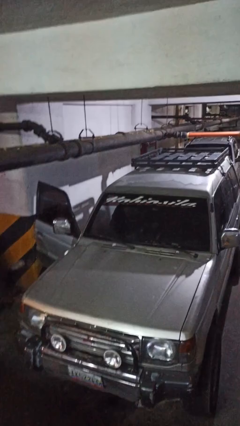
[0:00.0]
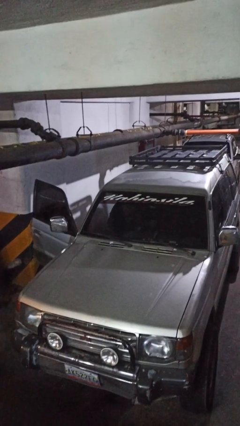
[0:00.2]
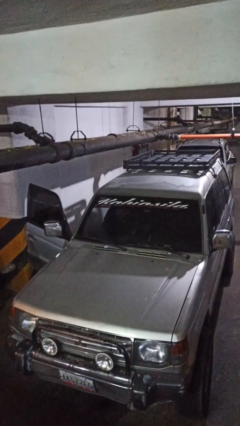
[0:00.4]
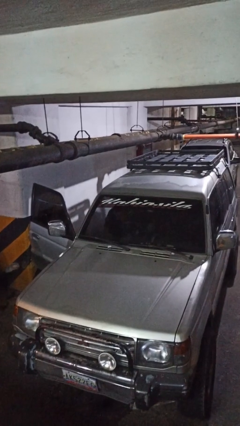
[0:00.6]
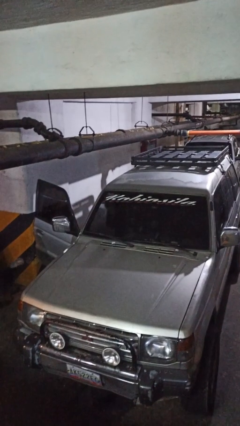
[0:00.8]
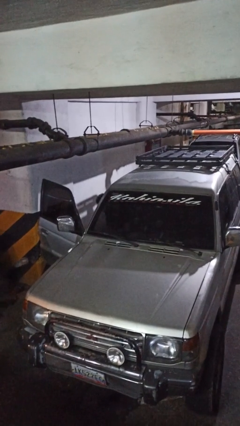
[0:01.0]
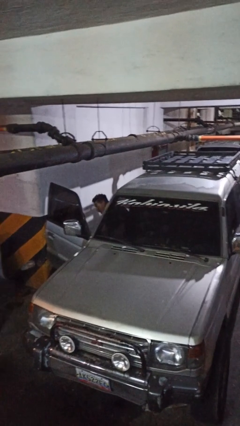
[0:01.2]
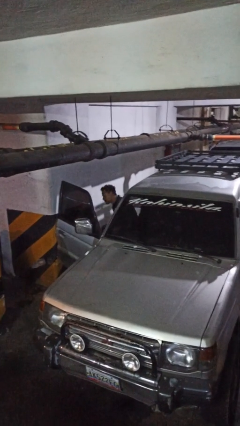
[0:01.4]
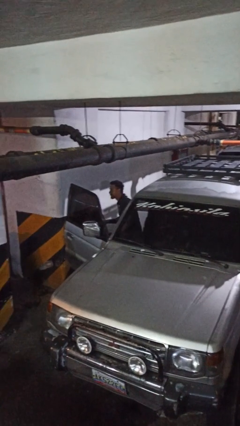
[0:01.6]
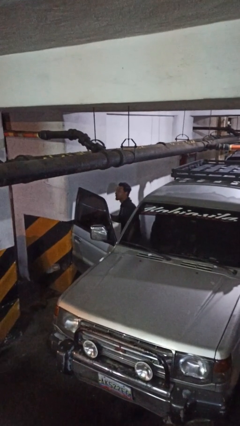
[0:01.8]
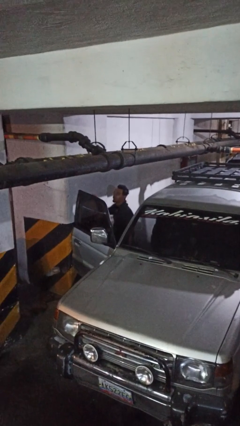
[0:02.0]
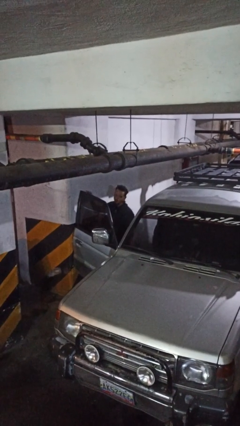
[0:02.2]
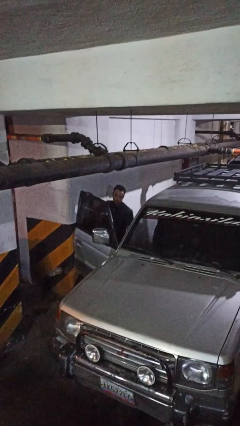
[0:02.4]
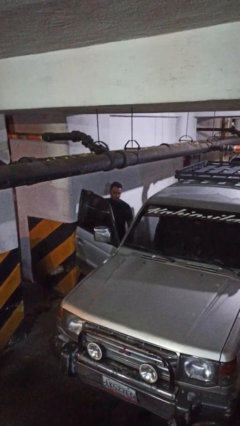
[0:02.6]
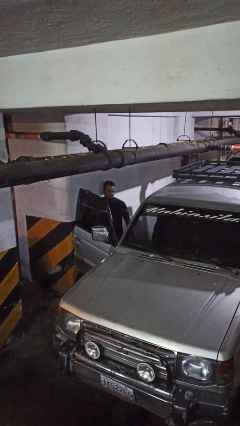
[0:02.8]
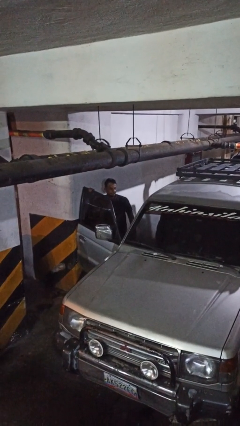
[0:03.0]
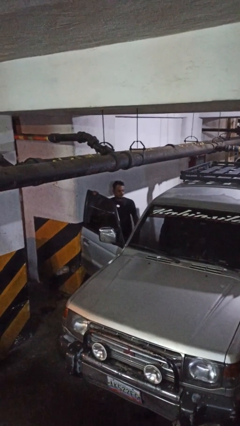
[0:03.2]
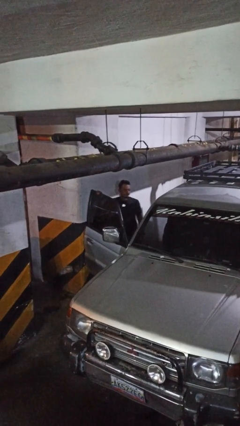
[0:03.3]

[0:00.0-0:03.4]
person exits car

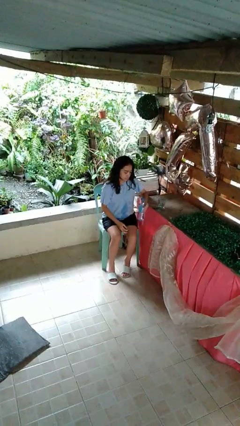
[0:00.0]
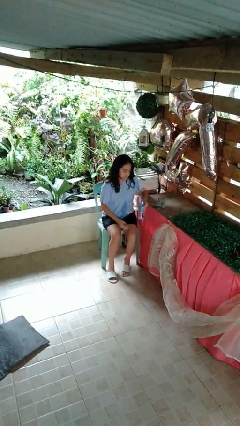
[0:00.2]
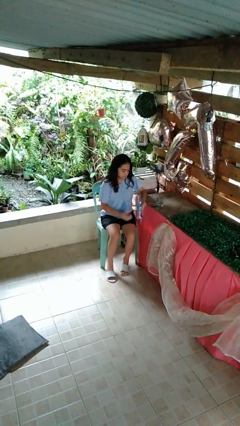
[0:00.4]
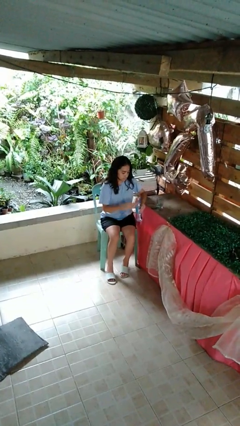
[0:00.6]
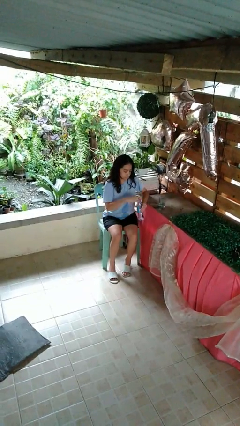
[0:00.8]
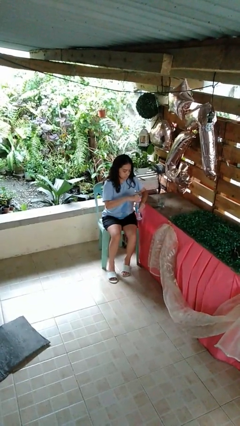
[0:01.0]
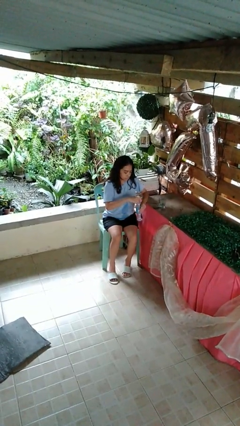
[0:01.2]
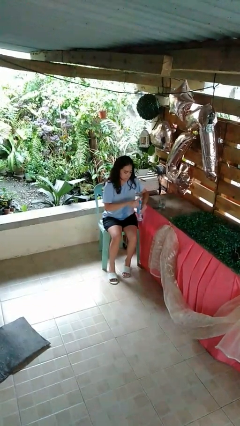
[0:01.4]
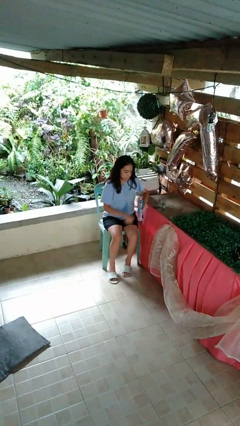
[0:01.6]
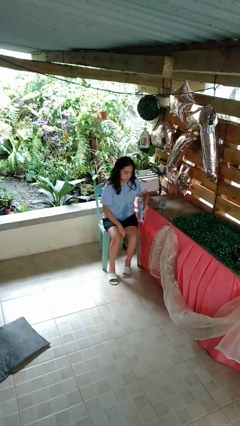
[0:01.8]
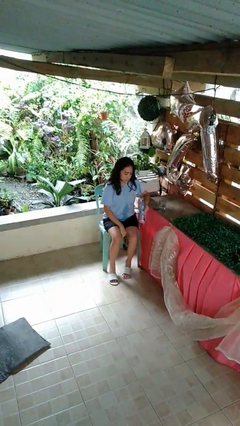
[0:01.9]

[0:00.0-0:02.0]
person screws lid to bottle

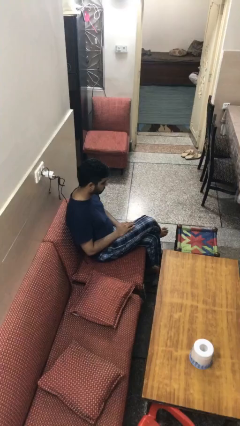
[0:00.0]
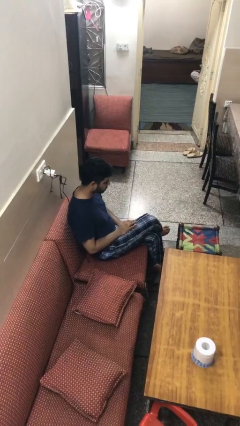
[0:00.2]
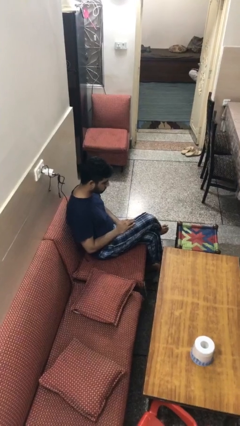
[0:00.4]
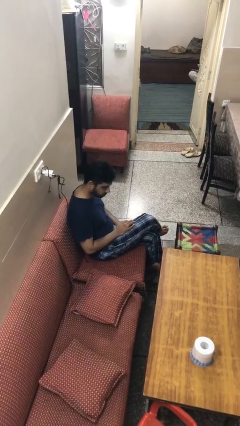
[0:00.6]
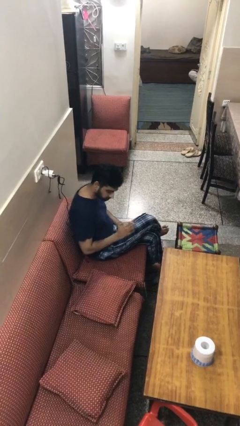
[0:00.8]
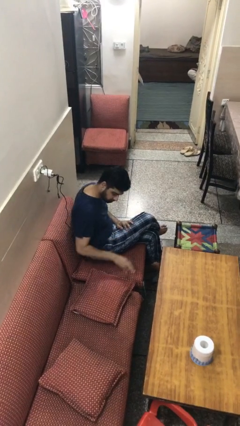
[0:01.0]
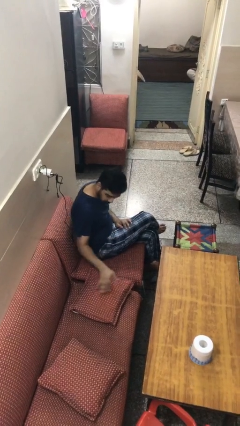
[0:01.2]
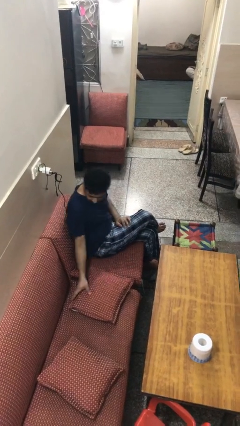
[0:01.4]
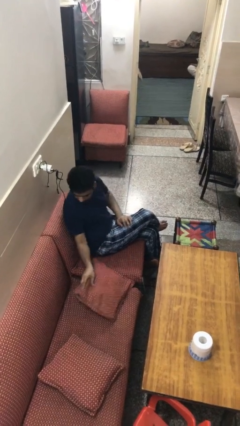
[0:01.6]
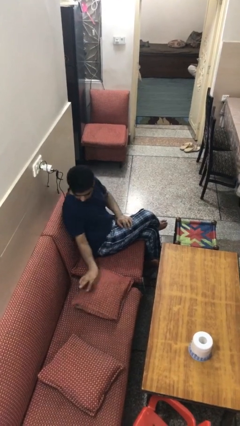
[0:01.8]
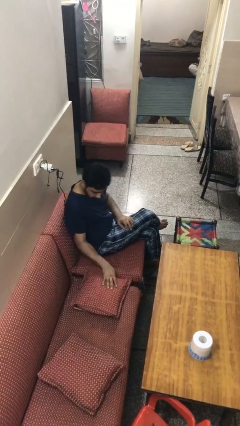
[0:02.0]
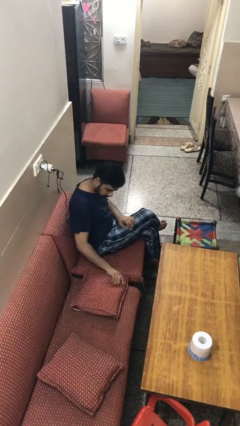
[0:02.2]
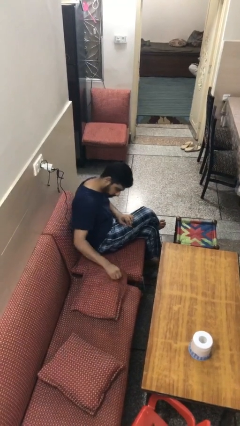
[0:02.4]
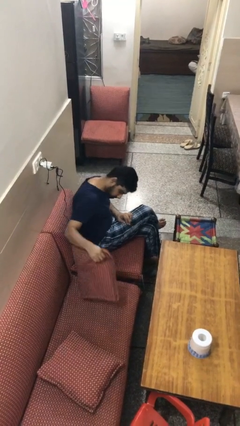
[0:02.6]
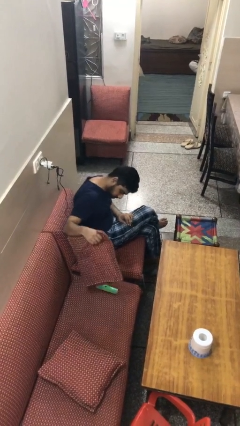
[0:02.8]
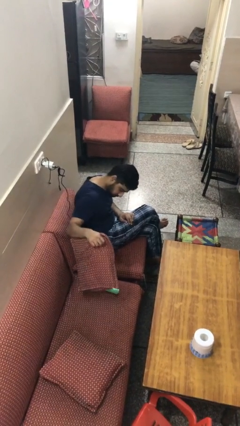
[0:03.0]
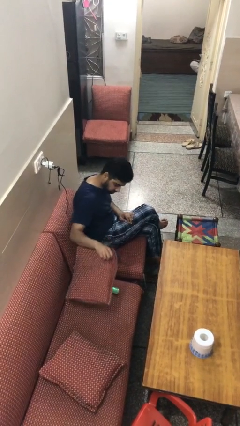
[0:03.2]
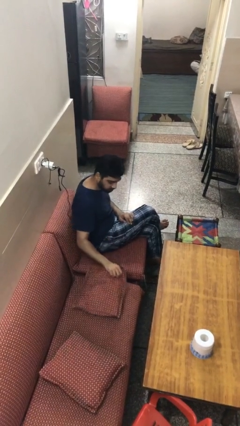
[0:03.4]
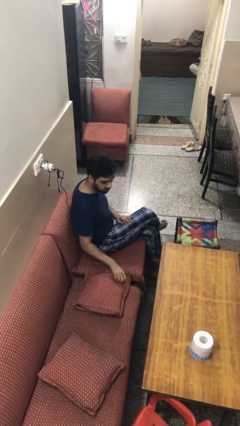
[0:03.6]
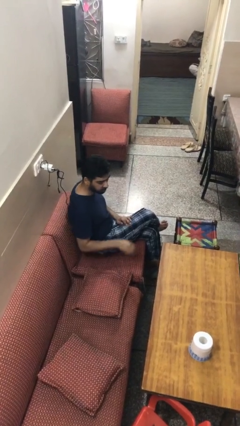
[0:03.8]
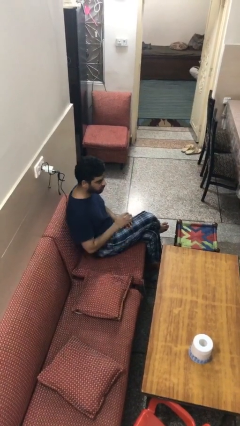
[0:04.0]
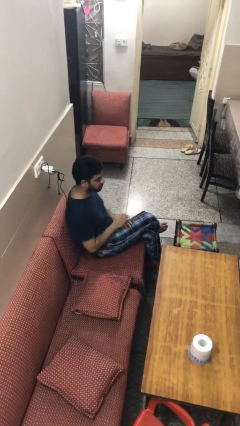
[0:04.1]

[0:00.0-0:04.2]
person searches in couch

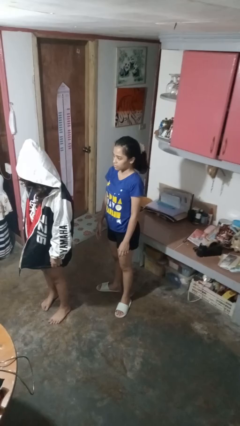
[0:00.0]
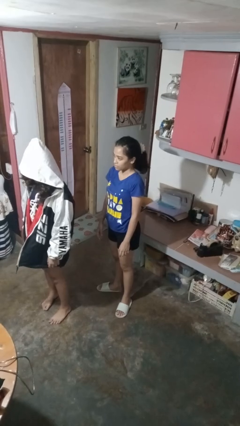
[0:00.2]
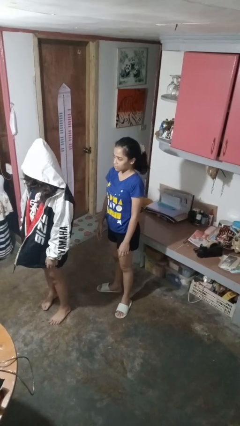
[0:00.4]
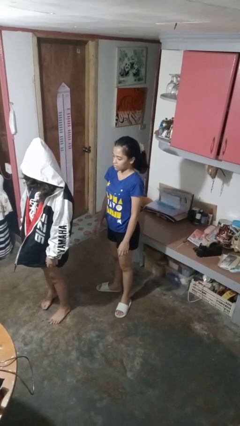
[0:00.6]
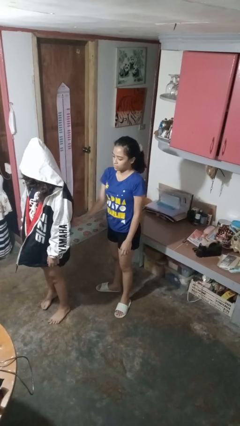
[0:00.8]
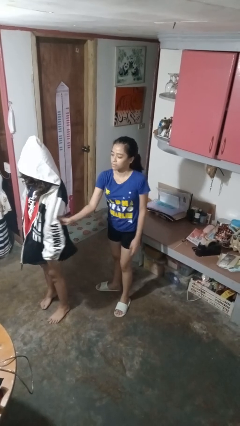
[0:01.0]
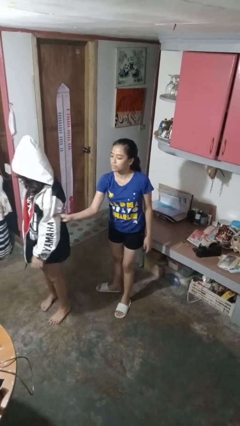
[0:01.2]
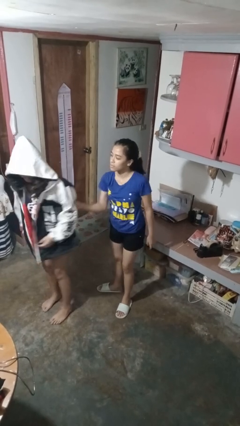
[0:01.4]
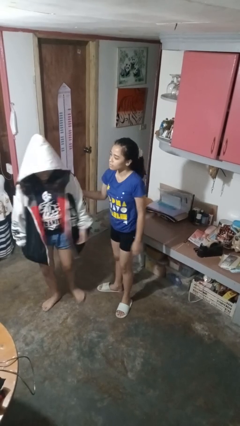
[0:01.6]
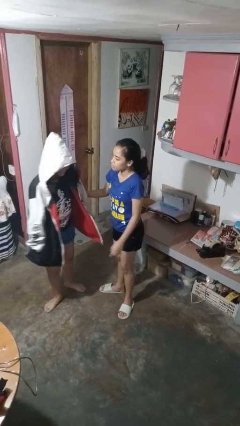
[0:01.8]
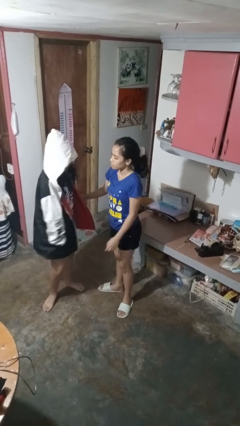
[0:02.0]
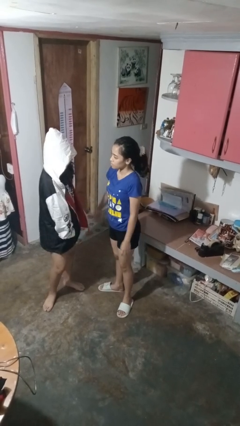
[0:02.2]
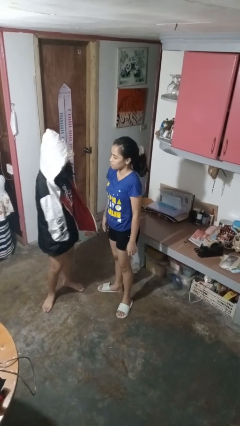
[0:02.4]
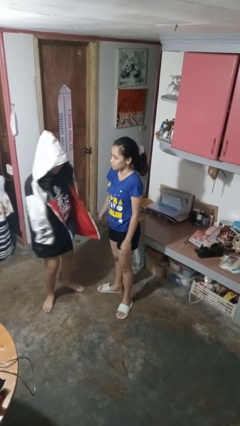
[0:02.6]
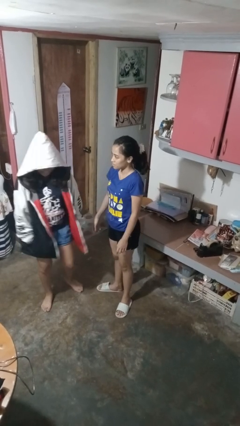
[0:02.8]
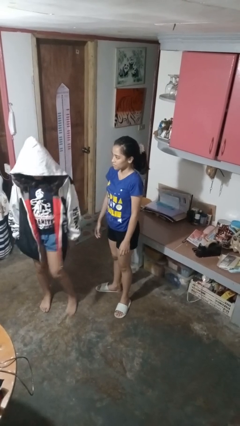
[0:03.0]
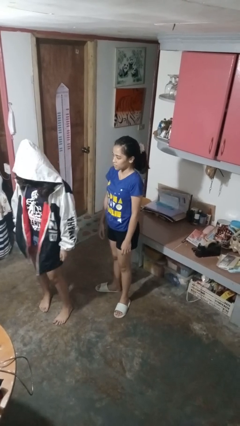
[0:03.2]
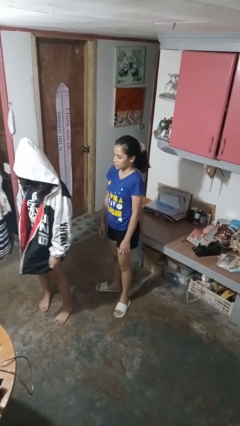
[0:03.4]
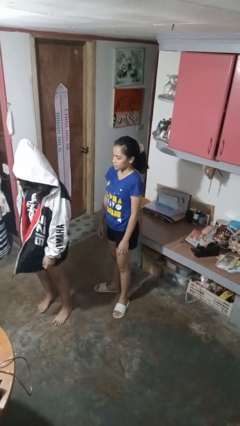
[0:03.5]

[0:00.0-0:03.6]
person grabs person by bicep

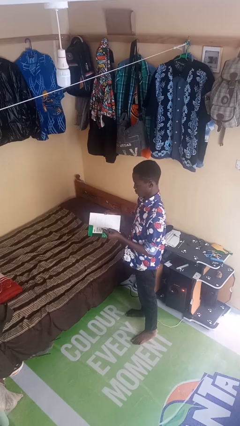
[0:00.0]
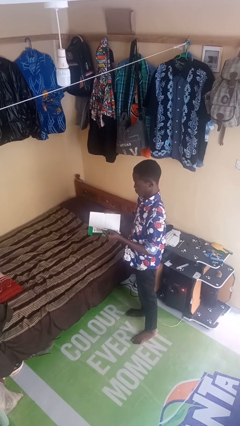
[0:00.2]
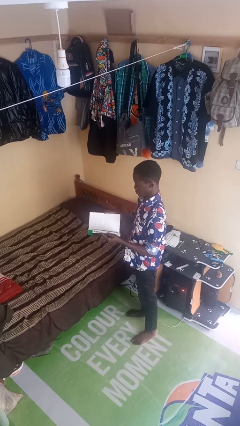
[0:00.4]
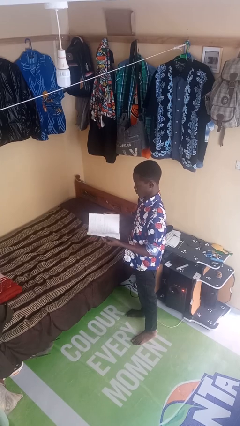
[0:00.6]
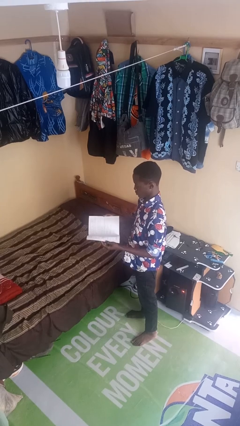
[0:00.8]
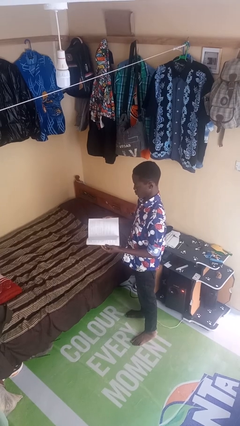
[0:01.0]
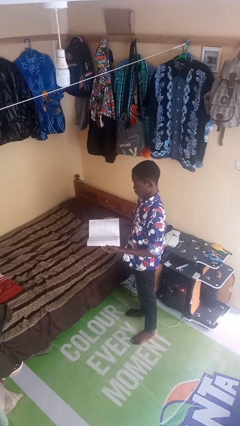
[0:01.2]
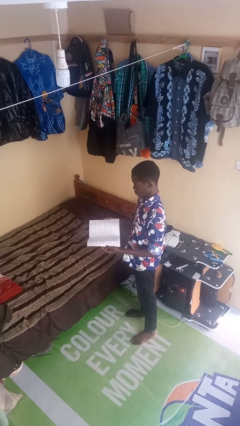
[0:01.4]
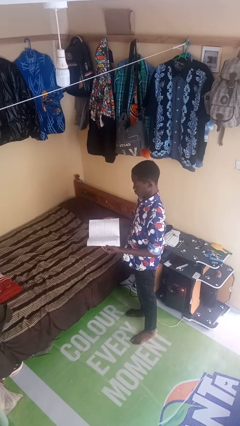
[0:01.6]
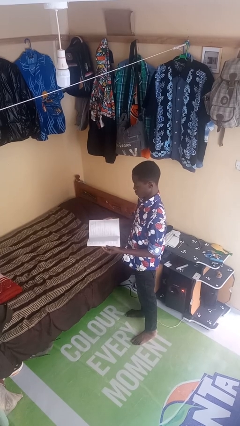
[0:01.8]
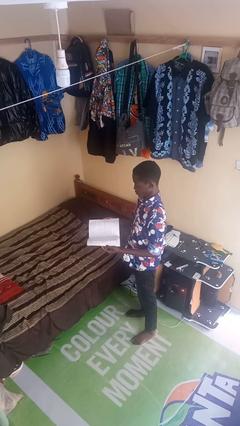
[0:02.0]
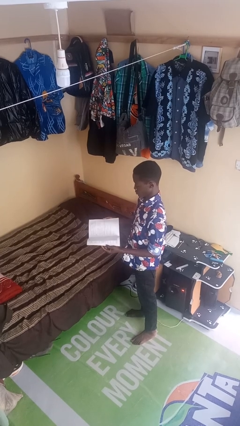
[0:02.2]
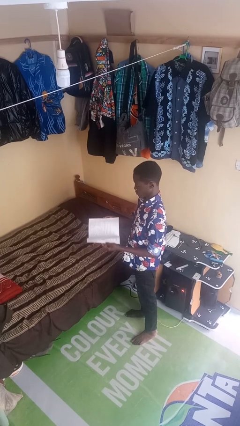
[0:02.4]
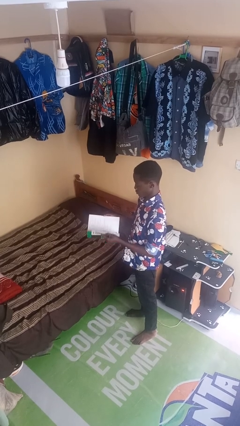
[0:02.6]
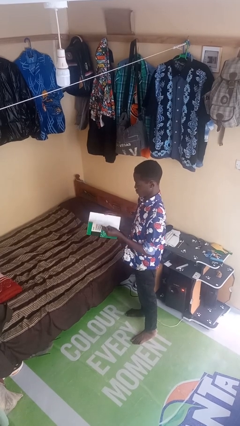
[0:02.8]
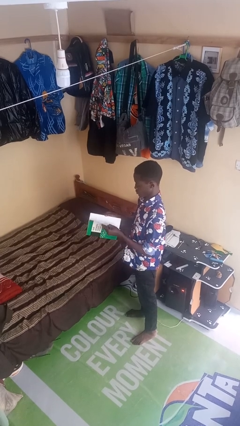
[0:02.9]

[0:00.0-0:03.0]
person reads magazine

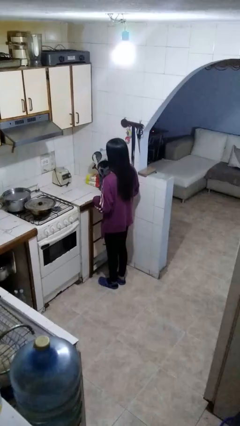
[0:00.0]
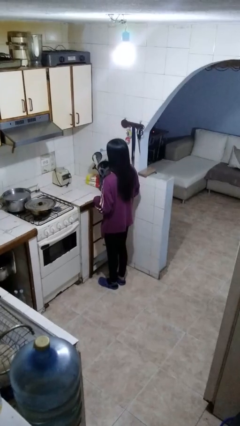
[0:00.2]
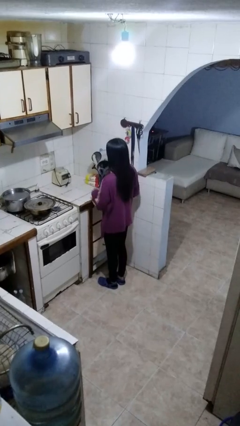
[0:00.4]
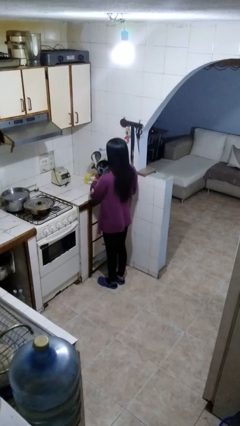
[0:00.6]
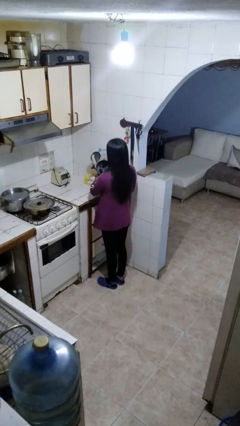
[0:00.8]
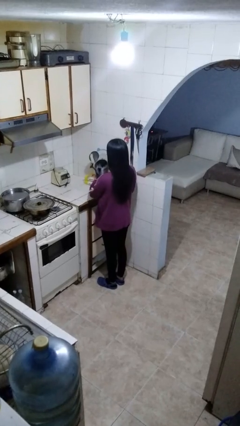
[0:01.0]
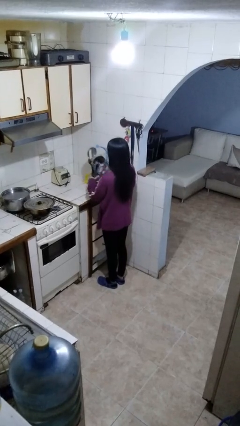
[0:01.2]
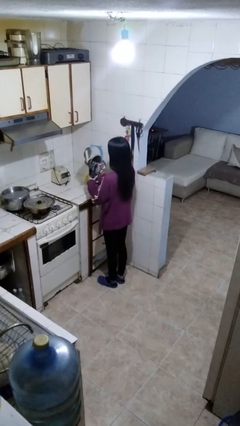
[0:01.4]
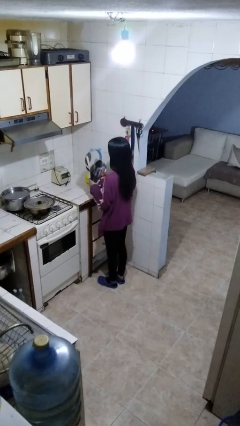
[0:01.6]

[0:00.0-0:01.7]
person puts down object on countertop
